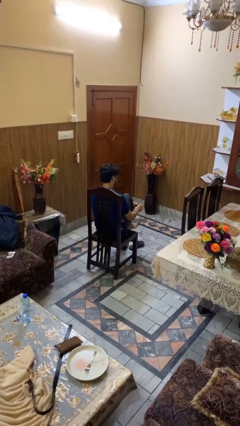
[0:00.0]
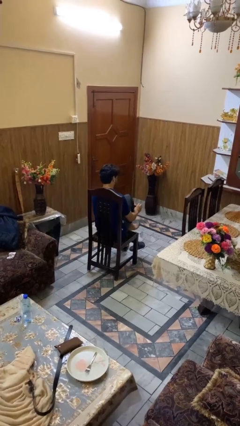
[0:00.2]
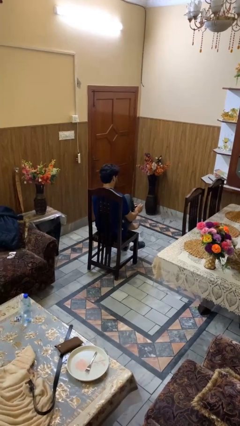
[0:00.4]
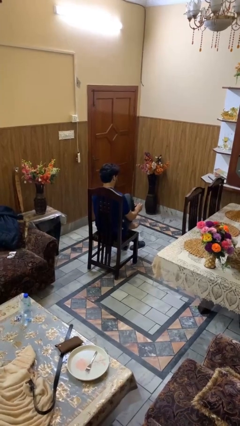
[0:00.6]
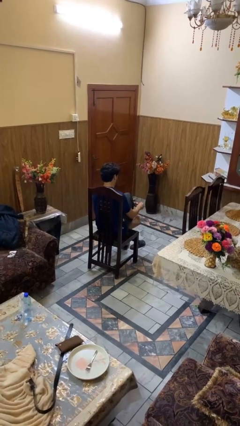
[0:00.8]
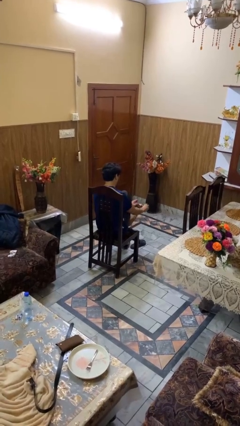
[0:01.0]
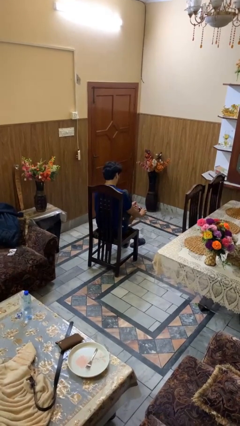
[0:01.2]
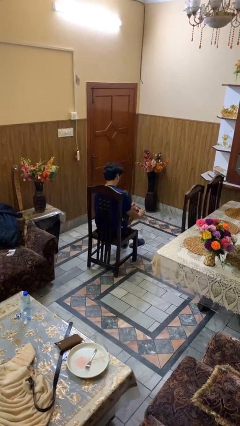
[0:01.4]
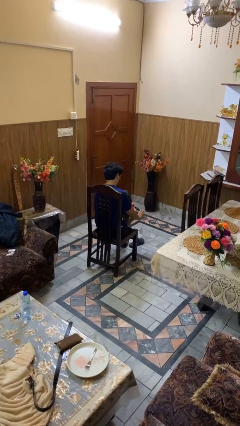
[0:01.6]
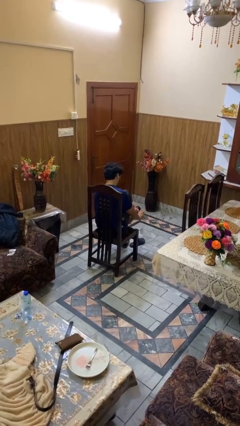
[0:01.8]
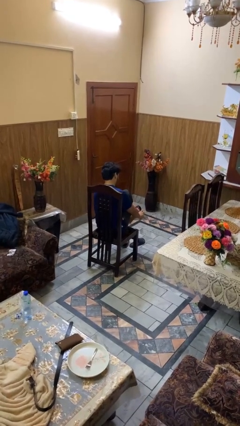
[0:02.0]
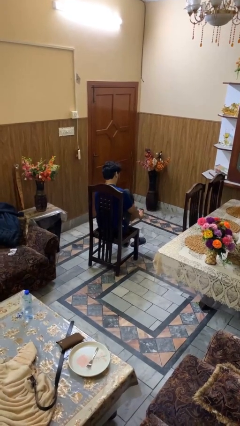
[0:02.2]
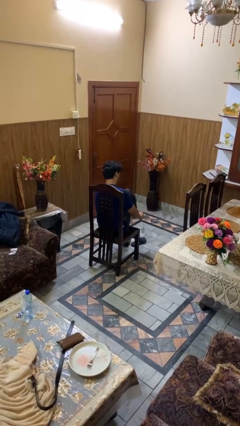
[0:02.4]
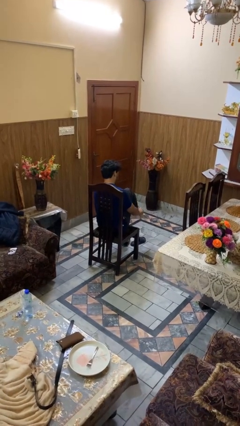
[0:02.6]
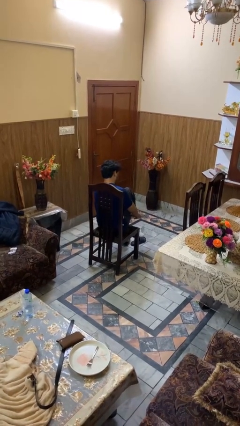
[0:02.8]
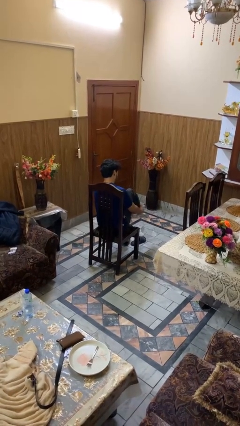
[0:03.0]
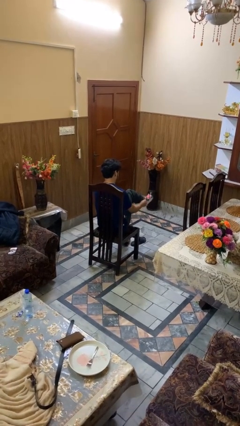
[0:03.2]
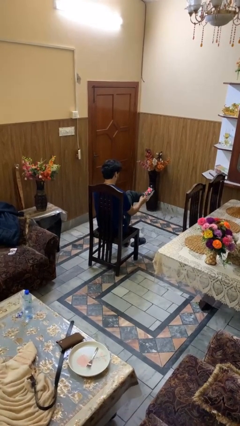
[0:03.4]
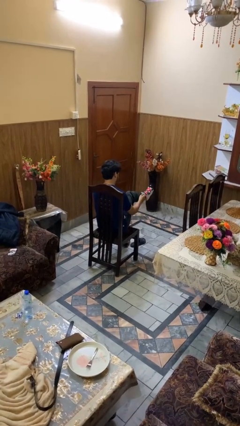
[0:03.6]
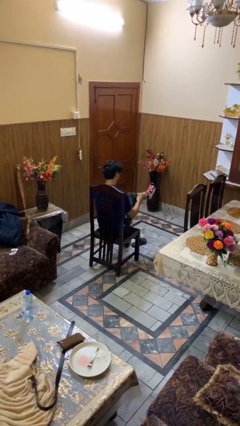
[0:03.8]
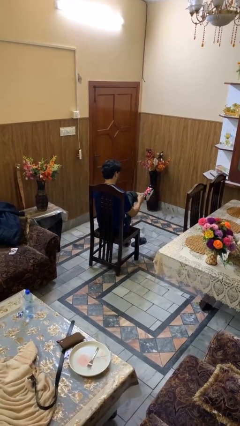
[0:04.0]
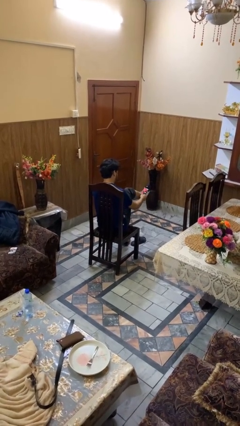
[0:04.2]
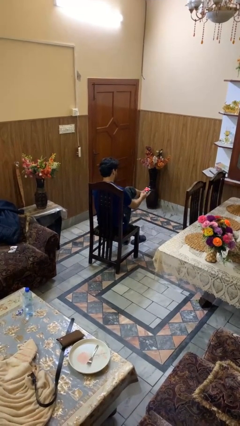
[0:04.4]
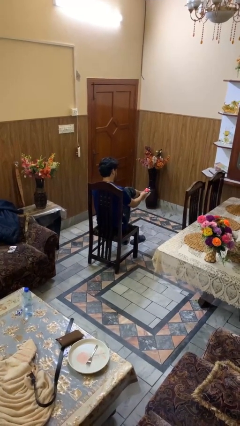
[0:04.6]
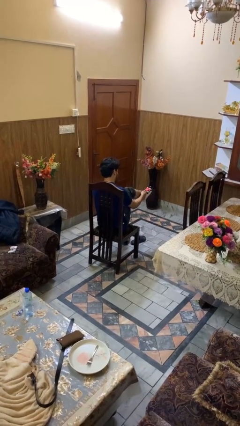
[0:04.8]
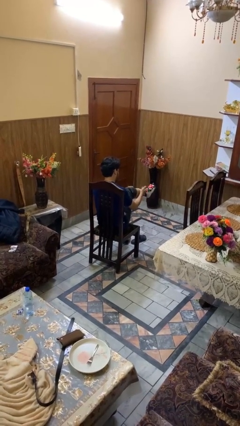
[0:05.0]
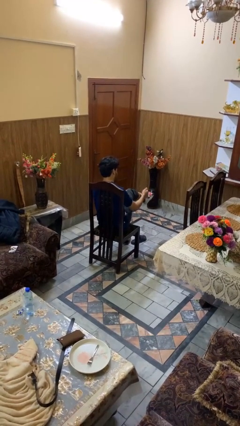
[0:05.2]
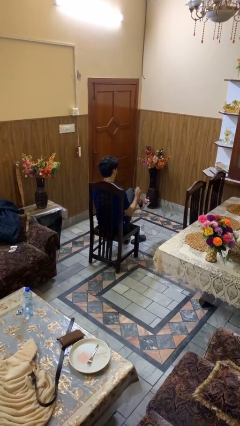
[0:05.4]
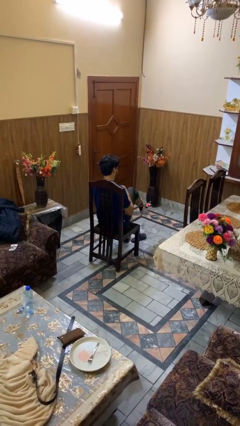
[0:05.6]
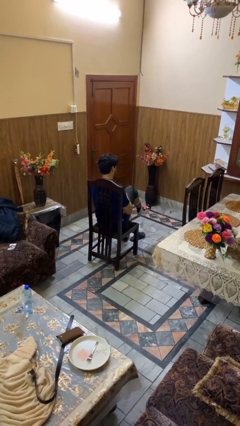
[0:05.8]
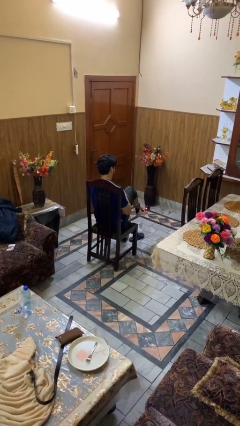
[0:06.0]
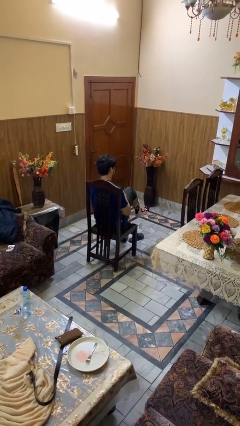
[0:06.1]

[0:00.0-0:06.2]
person puts on socks

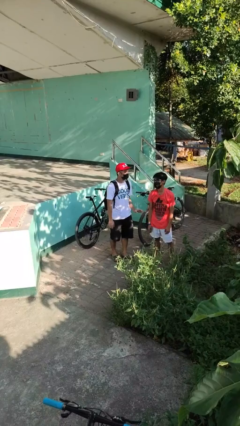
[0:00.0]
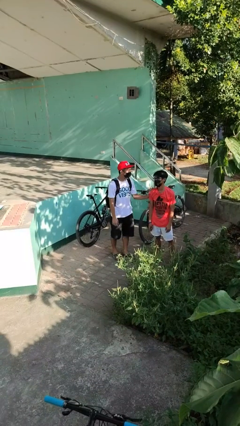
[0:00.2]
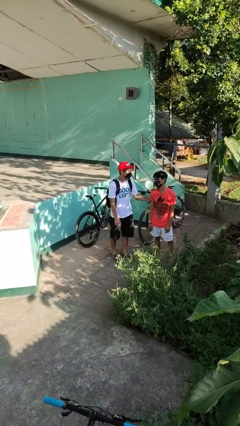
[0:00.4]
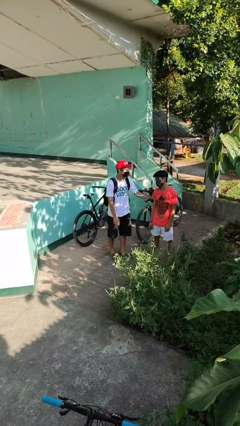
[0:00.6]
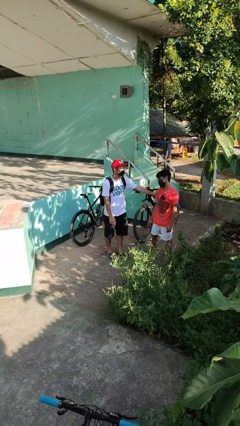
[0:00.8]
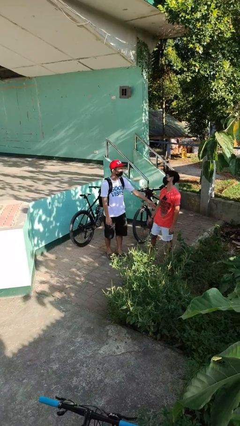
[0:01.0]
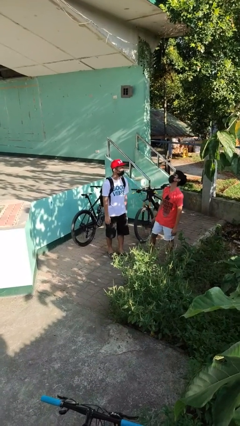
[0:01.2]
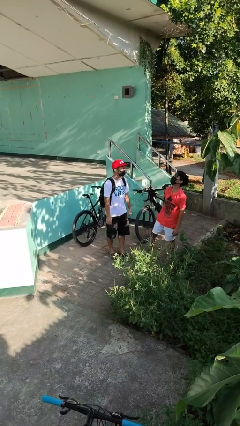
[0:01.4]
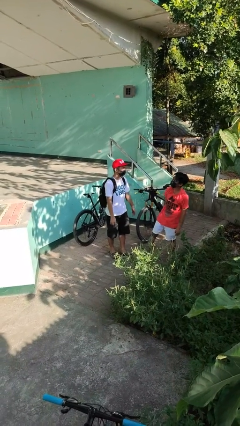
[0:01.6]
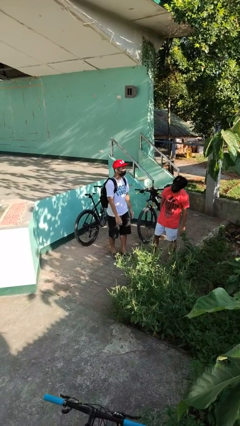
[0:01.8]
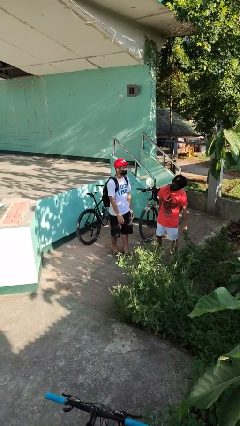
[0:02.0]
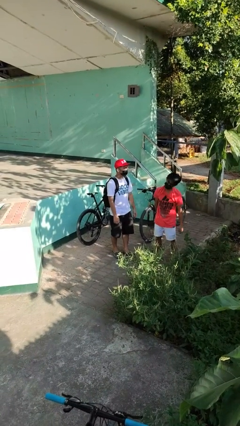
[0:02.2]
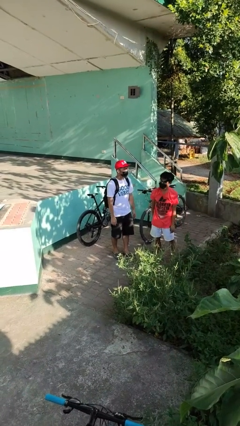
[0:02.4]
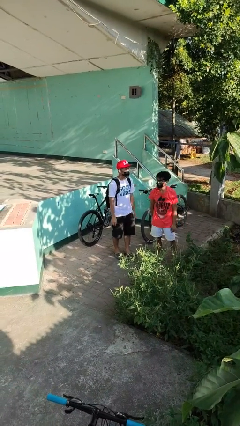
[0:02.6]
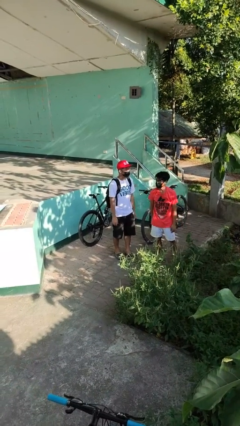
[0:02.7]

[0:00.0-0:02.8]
person shoves person

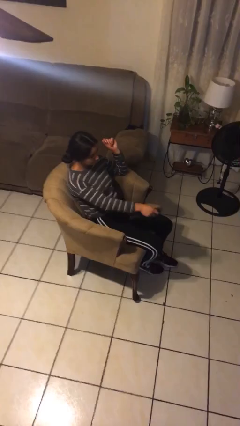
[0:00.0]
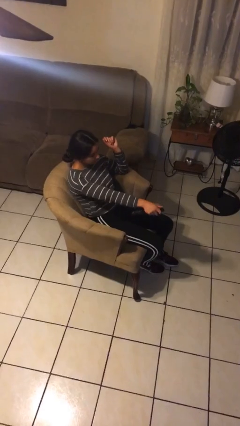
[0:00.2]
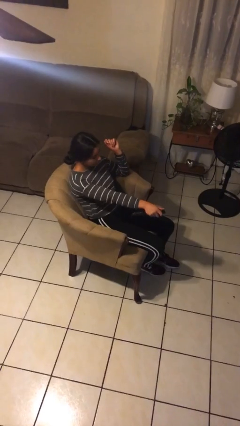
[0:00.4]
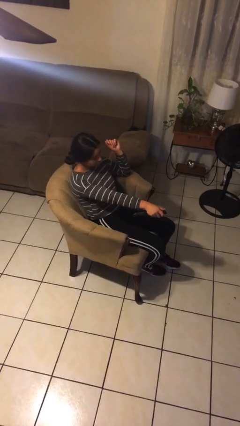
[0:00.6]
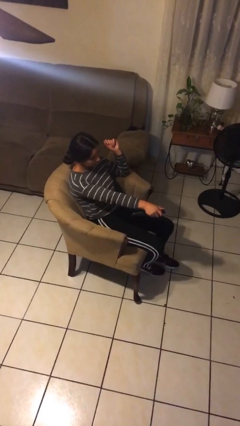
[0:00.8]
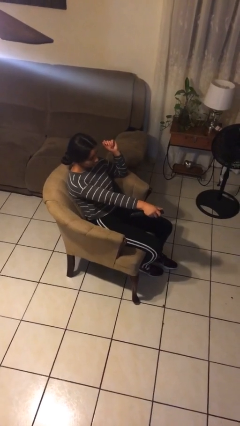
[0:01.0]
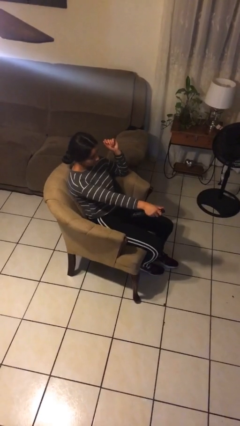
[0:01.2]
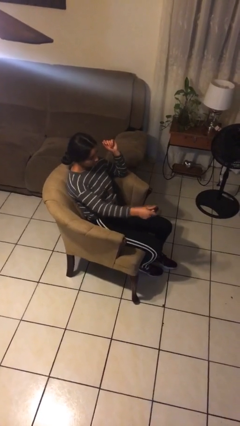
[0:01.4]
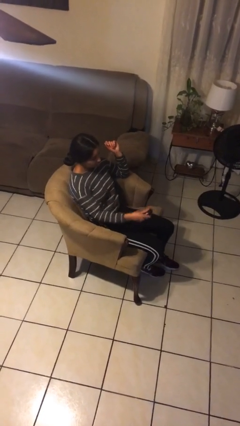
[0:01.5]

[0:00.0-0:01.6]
person uses television remote

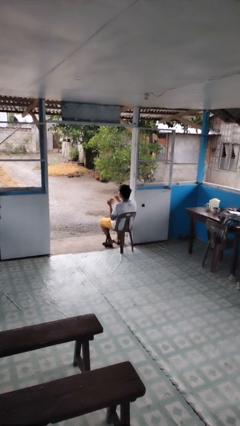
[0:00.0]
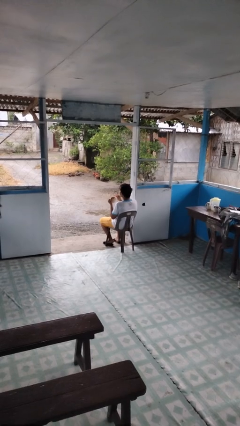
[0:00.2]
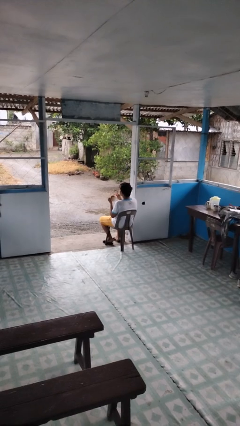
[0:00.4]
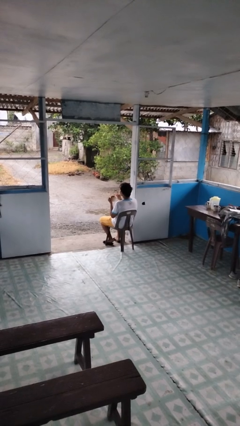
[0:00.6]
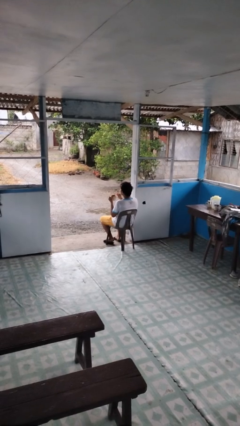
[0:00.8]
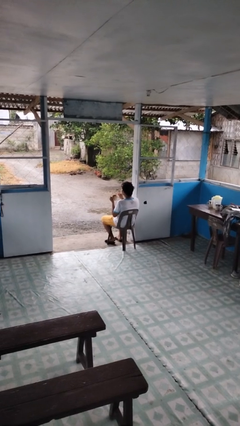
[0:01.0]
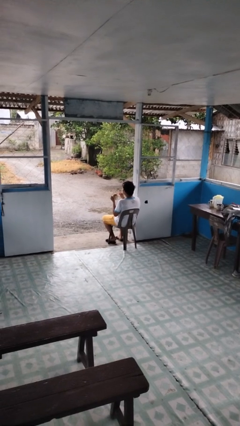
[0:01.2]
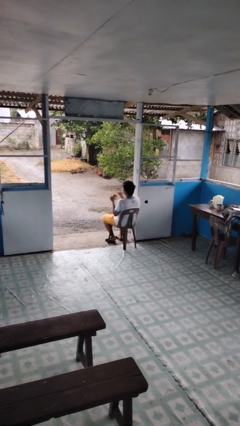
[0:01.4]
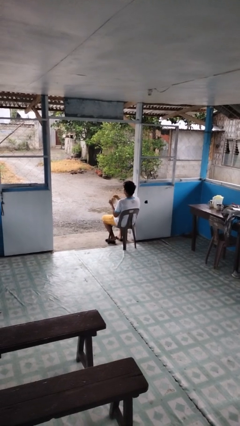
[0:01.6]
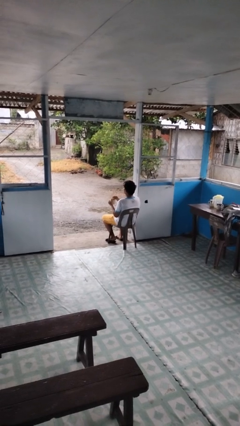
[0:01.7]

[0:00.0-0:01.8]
person drinks from straw

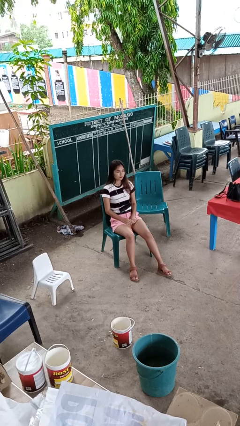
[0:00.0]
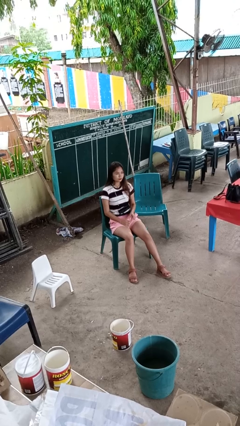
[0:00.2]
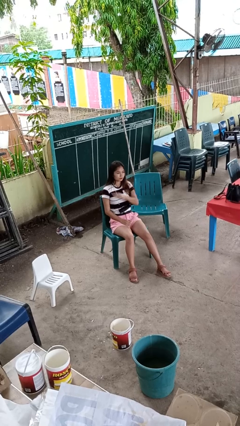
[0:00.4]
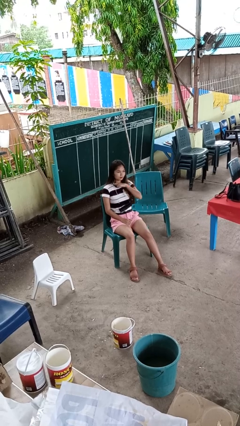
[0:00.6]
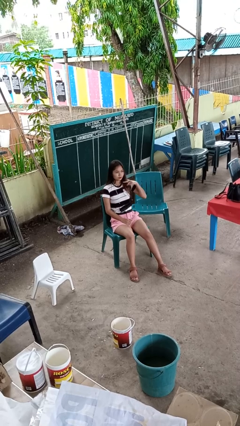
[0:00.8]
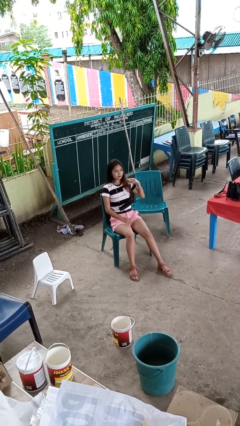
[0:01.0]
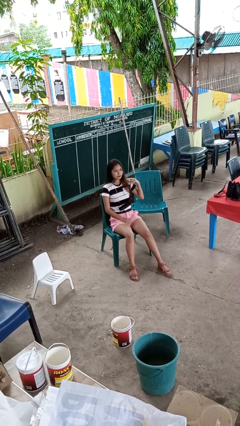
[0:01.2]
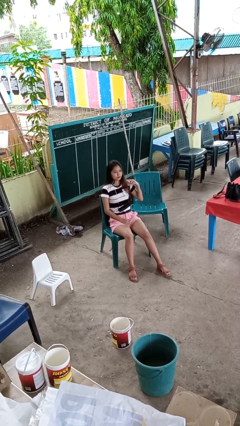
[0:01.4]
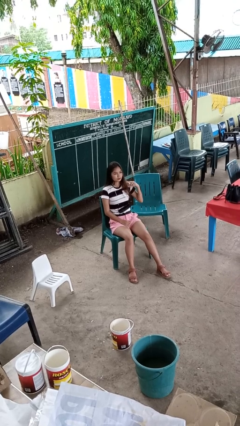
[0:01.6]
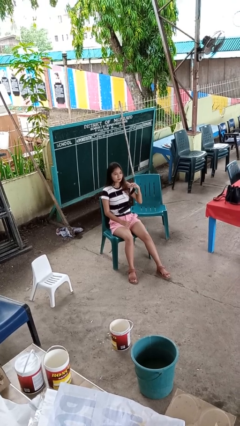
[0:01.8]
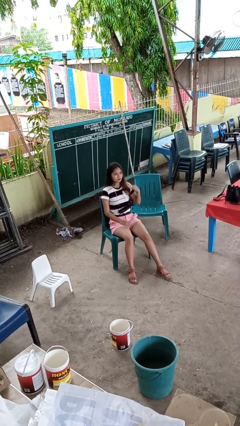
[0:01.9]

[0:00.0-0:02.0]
person gestures cut

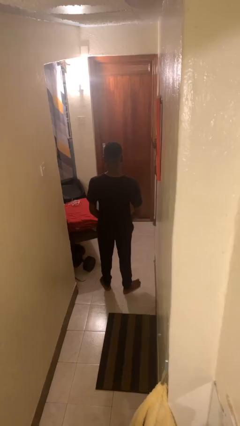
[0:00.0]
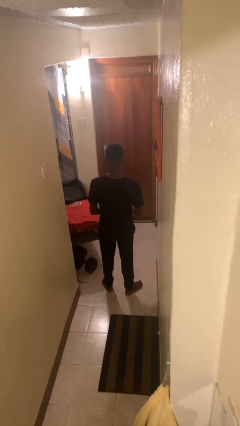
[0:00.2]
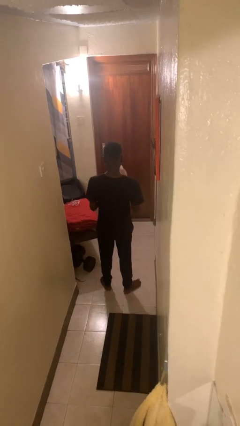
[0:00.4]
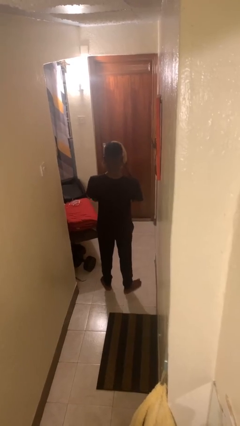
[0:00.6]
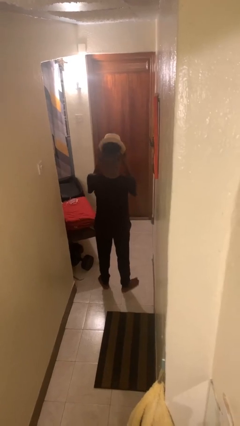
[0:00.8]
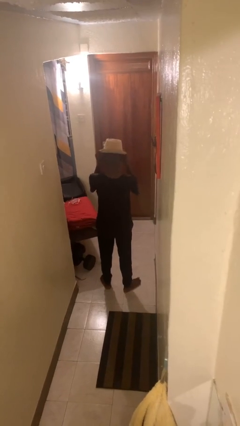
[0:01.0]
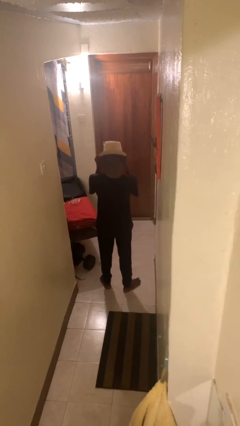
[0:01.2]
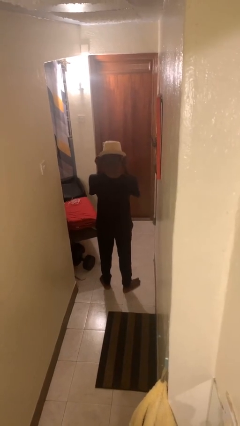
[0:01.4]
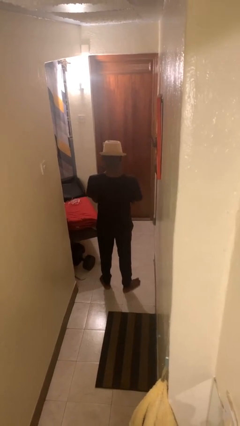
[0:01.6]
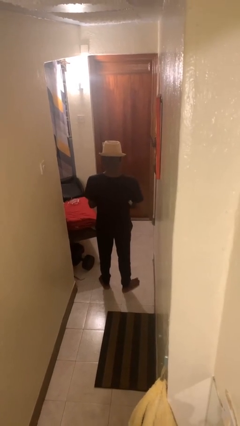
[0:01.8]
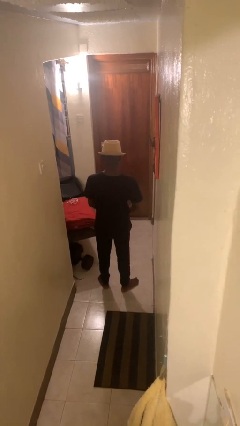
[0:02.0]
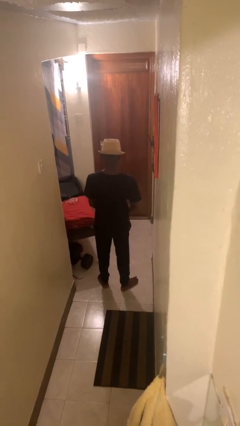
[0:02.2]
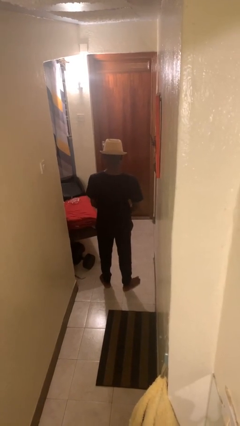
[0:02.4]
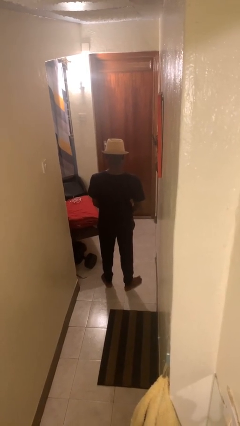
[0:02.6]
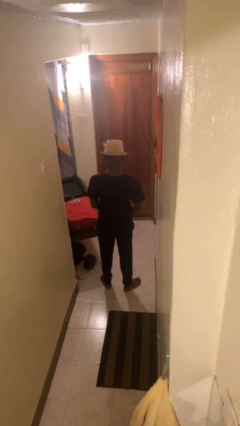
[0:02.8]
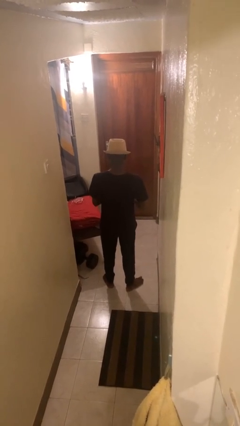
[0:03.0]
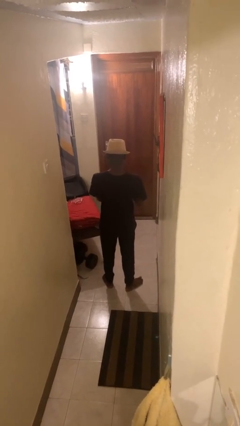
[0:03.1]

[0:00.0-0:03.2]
person puts on hat
